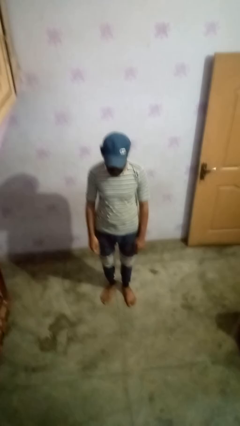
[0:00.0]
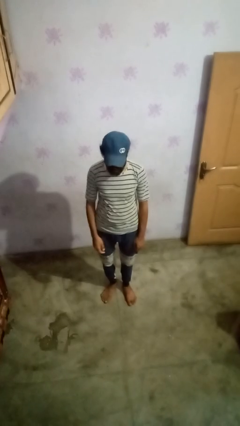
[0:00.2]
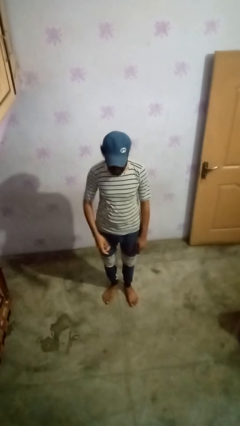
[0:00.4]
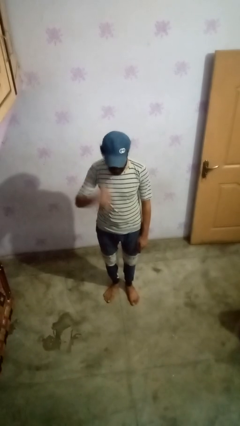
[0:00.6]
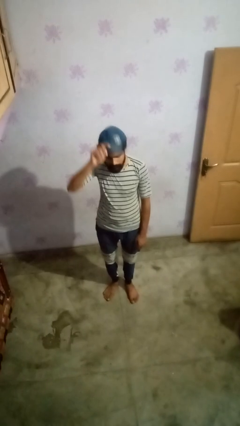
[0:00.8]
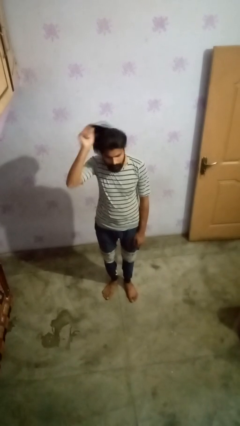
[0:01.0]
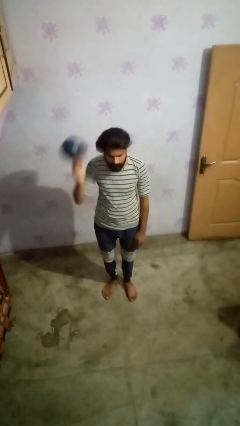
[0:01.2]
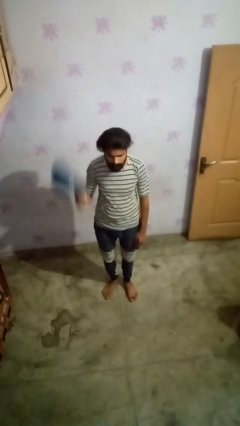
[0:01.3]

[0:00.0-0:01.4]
person takes off hat

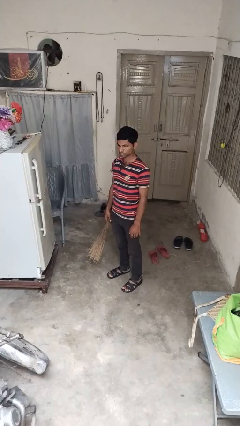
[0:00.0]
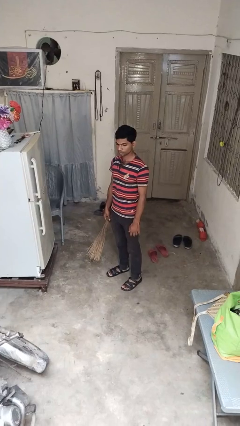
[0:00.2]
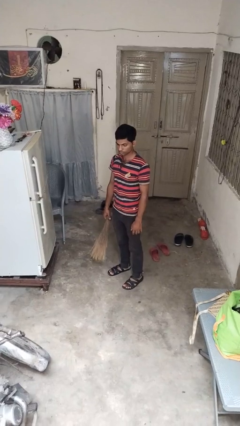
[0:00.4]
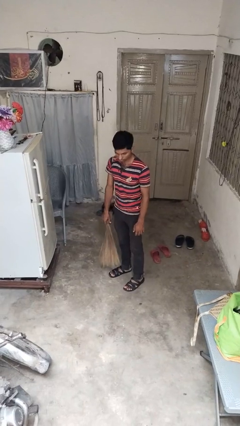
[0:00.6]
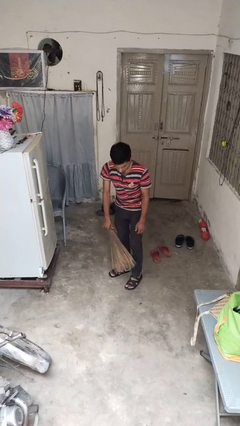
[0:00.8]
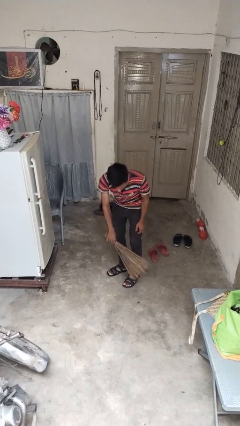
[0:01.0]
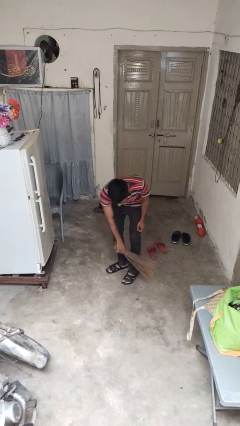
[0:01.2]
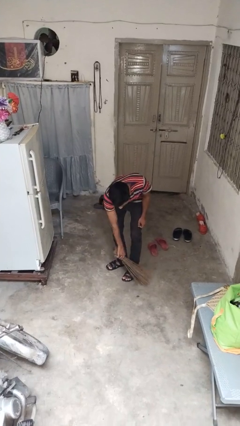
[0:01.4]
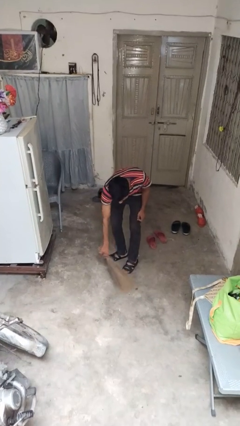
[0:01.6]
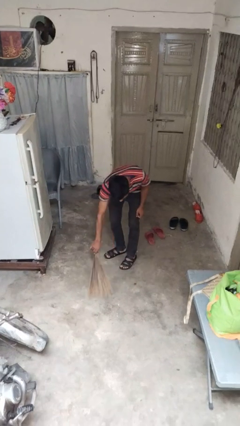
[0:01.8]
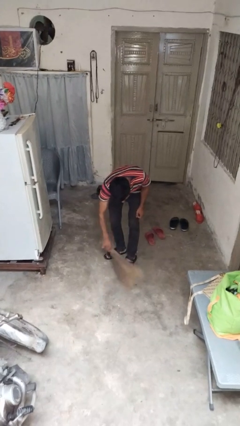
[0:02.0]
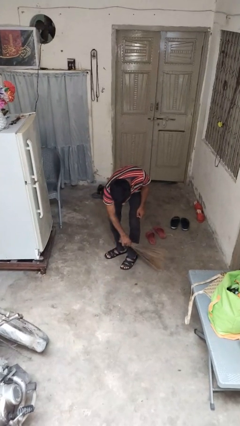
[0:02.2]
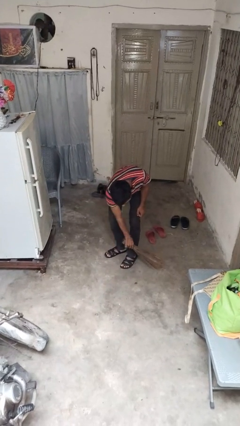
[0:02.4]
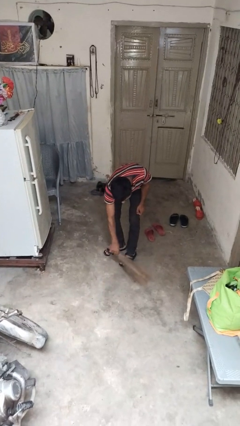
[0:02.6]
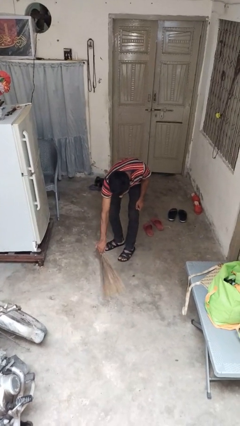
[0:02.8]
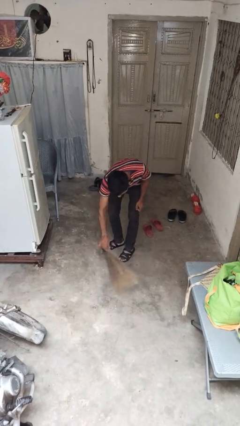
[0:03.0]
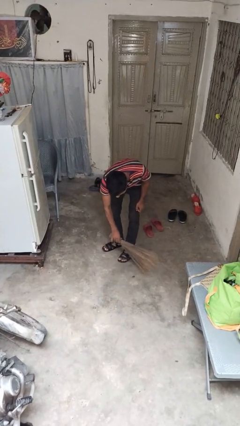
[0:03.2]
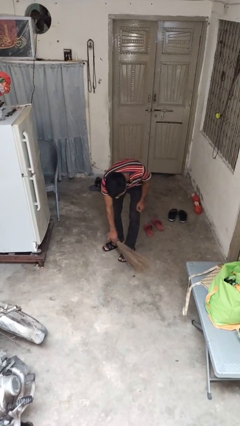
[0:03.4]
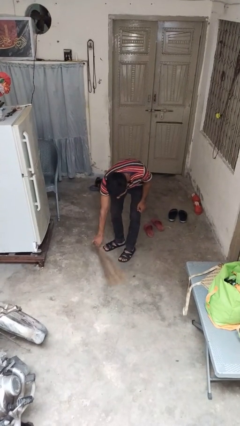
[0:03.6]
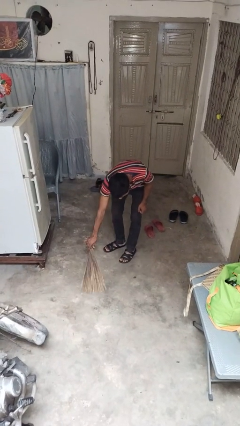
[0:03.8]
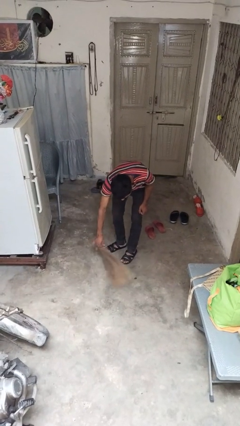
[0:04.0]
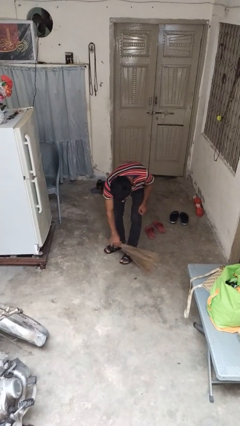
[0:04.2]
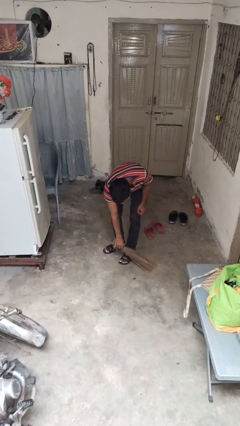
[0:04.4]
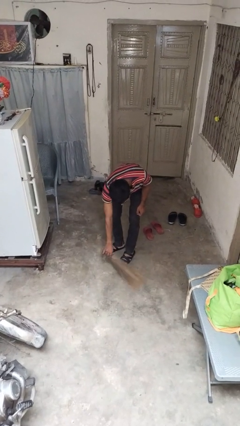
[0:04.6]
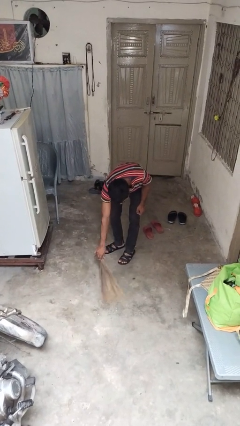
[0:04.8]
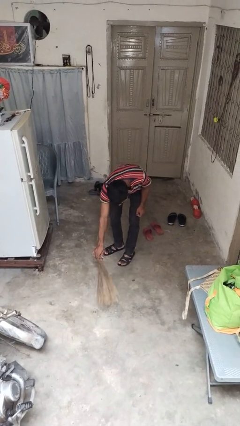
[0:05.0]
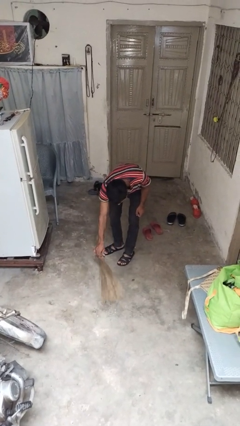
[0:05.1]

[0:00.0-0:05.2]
person sweeps floor

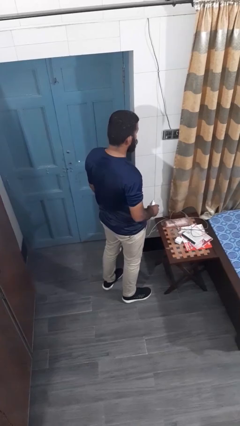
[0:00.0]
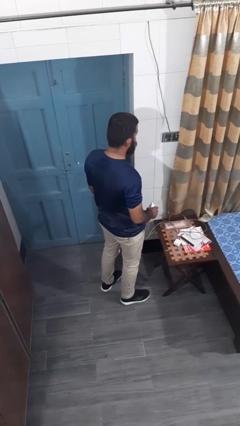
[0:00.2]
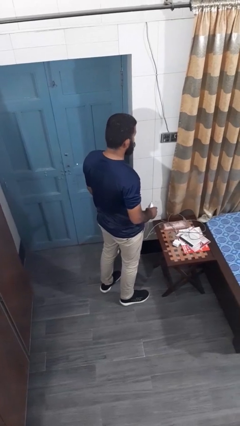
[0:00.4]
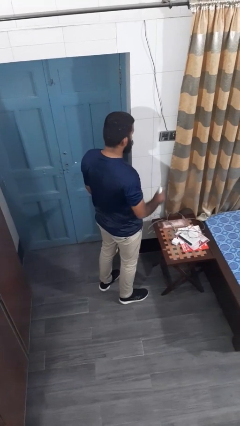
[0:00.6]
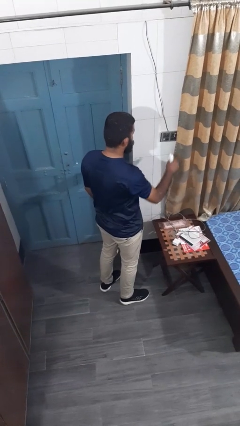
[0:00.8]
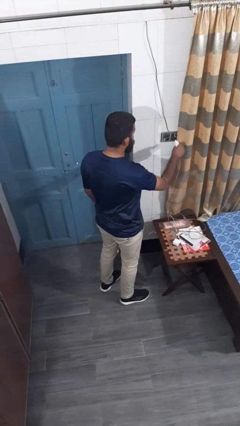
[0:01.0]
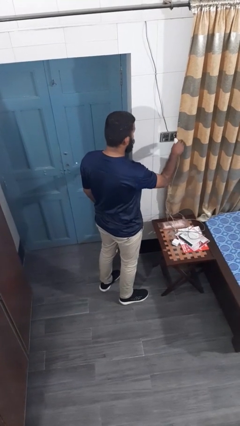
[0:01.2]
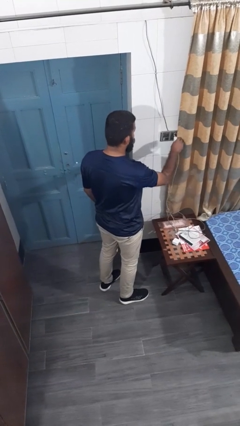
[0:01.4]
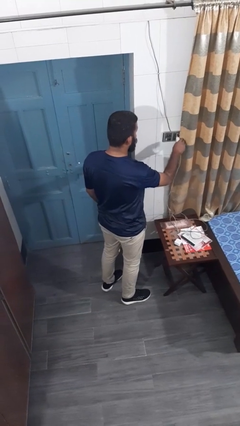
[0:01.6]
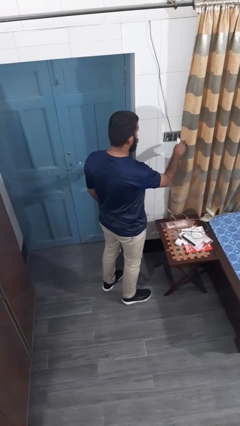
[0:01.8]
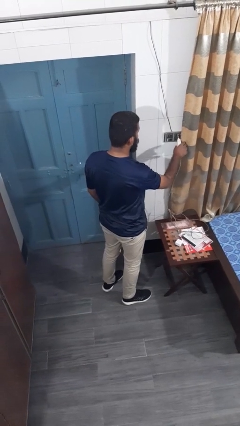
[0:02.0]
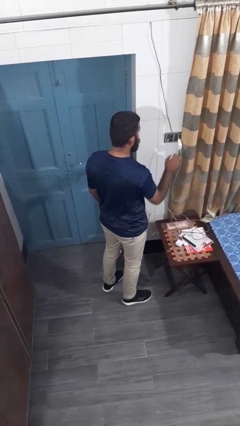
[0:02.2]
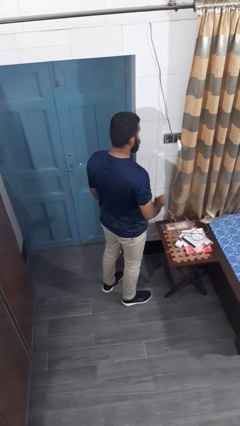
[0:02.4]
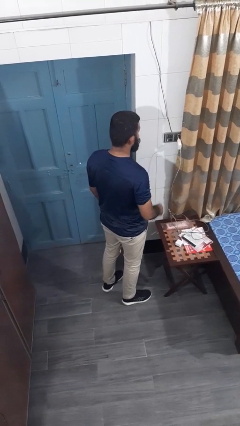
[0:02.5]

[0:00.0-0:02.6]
person plugs into electrical socket

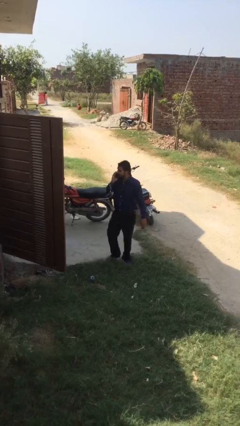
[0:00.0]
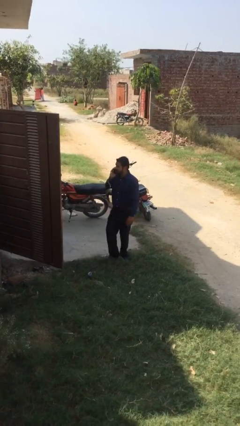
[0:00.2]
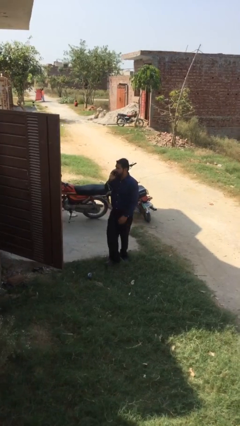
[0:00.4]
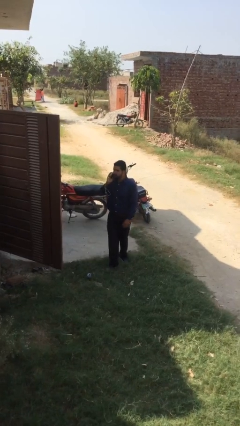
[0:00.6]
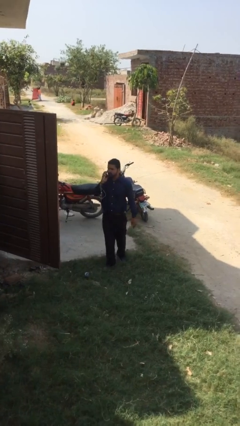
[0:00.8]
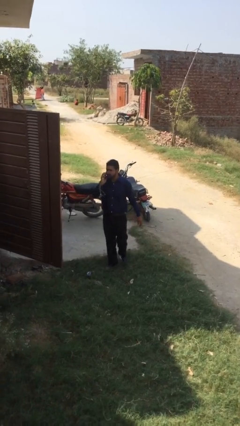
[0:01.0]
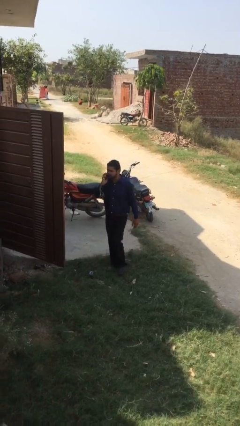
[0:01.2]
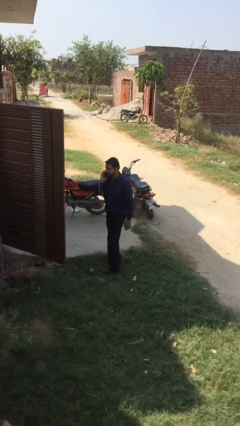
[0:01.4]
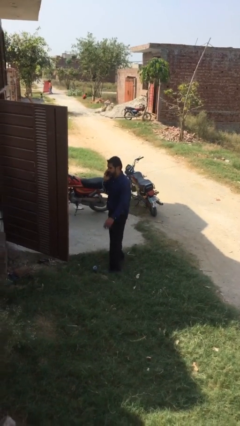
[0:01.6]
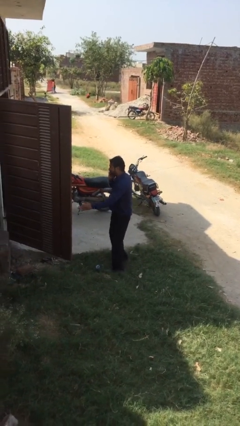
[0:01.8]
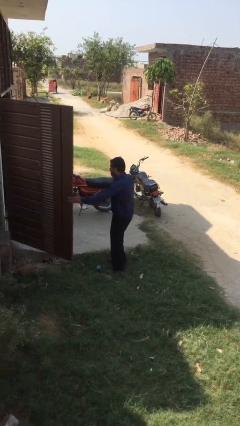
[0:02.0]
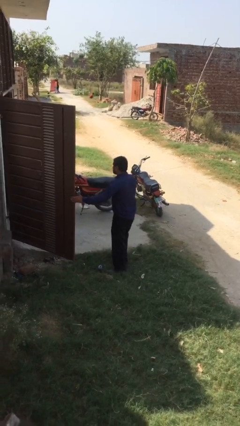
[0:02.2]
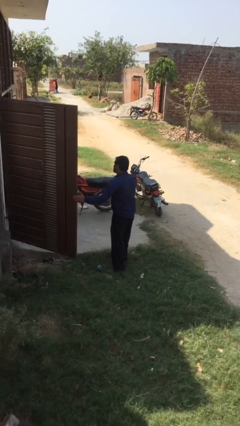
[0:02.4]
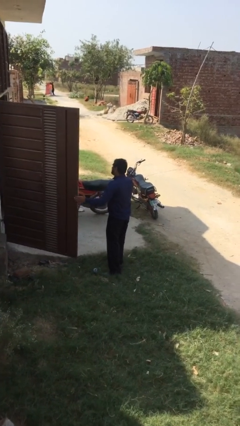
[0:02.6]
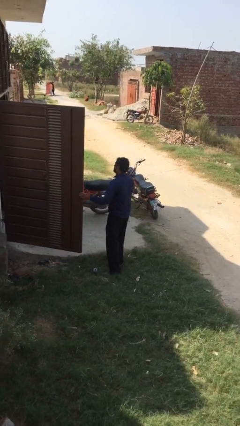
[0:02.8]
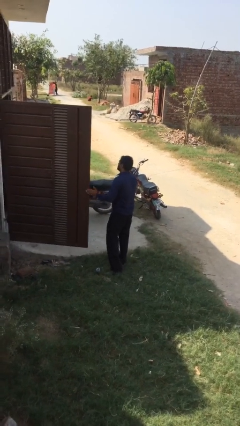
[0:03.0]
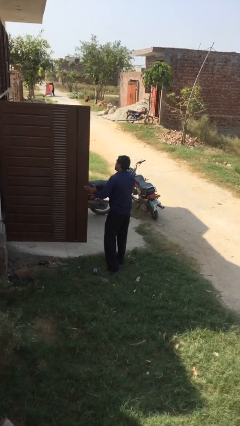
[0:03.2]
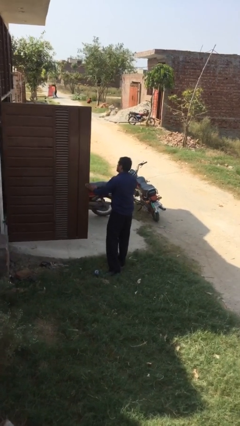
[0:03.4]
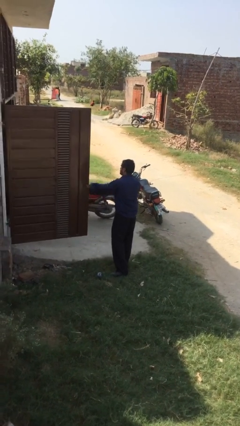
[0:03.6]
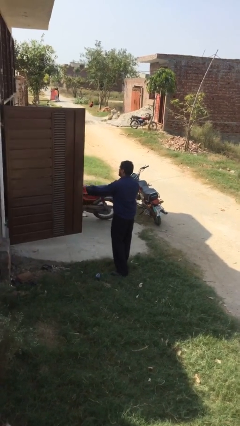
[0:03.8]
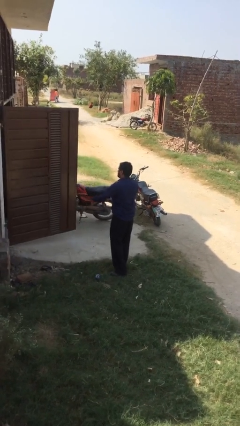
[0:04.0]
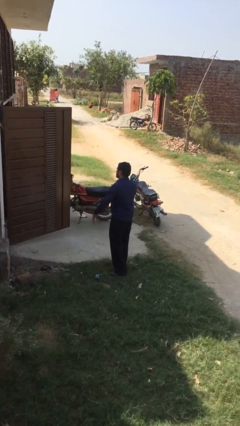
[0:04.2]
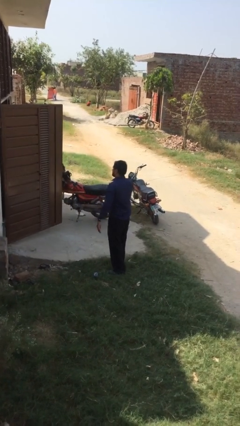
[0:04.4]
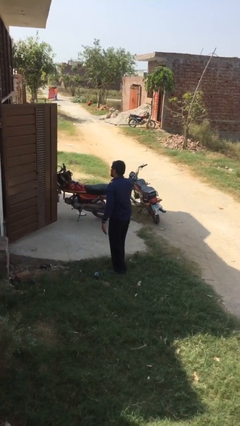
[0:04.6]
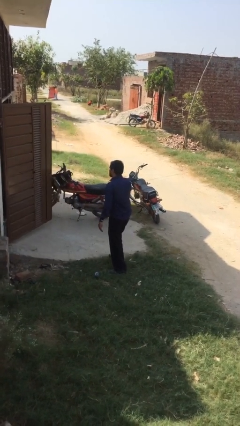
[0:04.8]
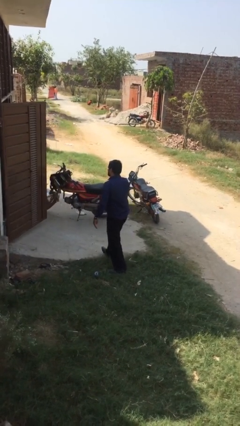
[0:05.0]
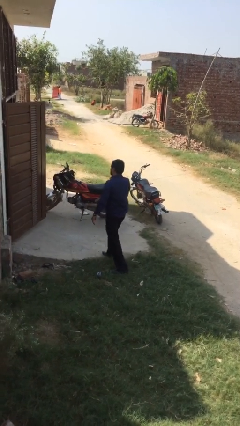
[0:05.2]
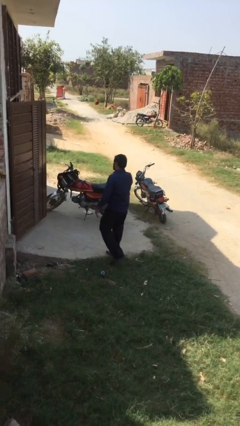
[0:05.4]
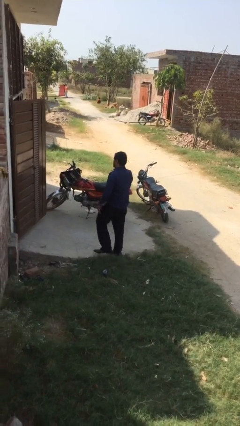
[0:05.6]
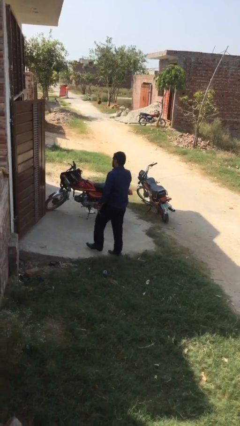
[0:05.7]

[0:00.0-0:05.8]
person closes facility door

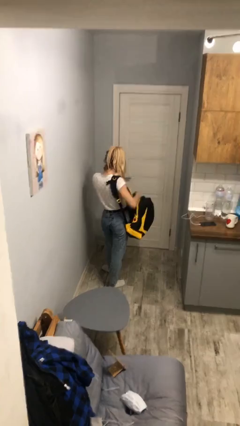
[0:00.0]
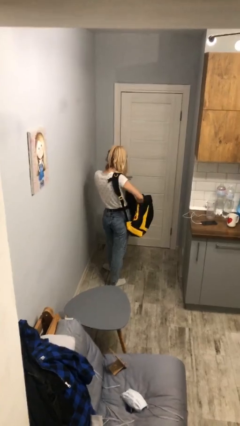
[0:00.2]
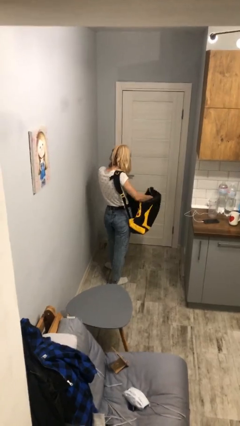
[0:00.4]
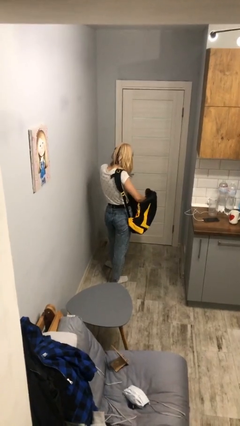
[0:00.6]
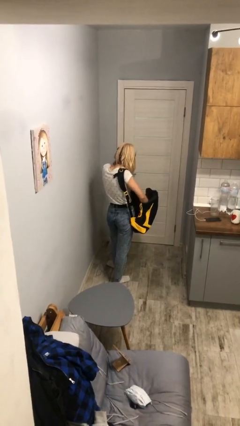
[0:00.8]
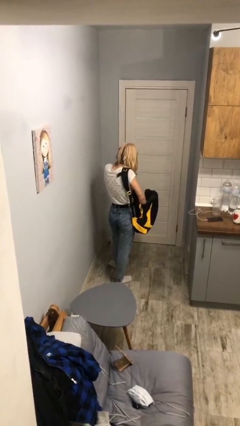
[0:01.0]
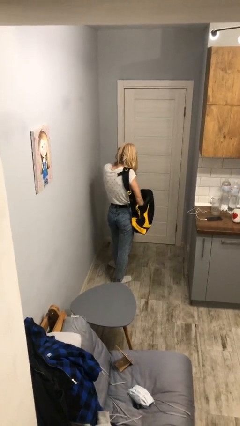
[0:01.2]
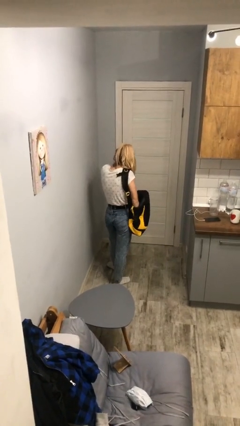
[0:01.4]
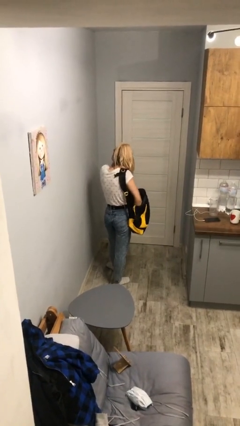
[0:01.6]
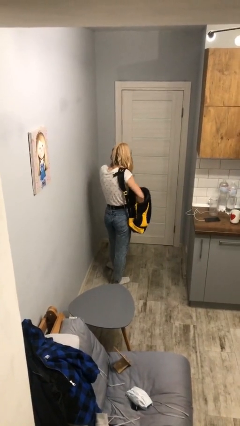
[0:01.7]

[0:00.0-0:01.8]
person searches in backpack

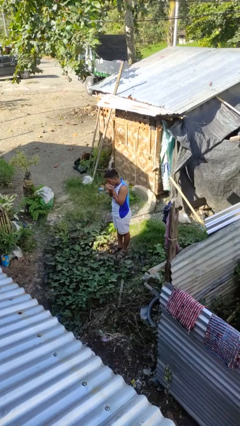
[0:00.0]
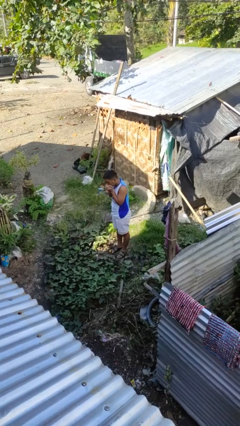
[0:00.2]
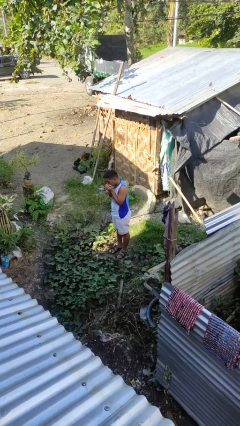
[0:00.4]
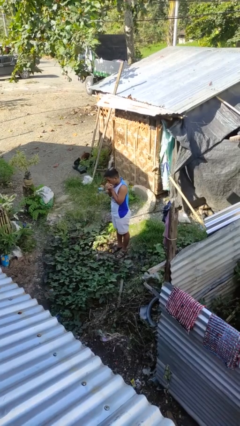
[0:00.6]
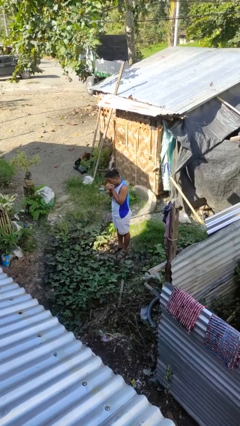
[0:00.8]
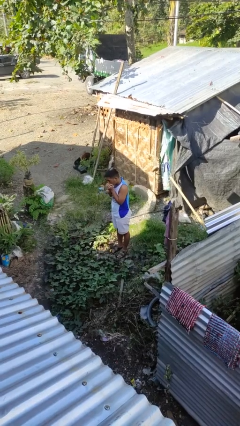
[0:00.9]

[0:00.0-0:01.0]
person blows into hands
